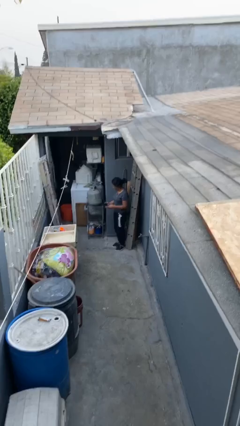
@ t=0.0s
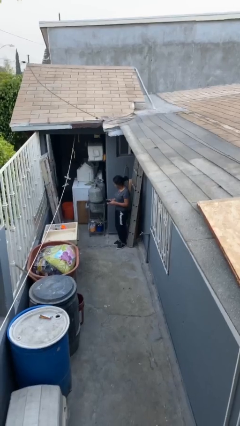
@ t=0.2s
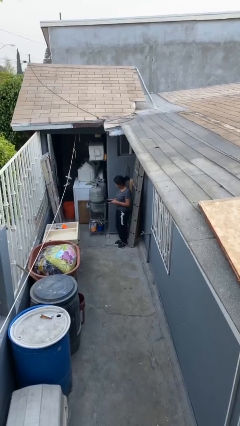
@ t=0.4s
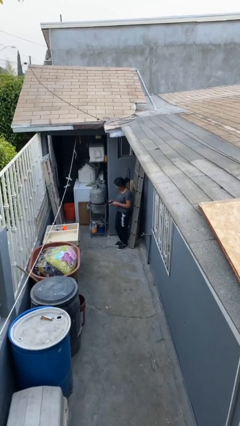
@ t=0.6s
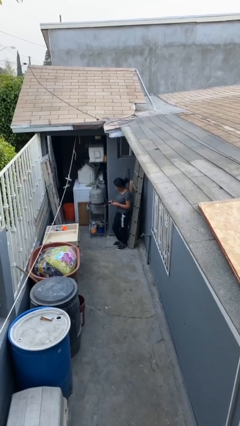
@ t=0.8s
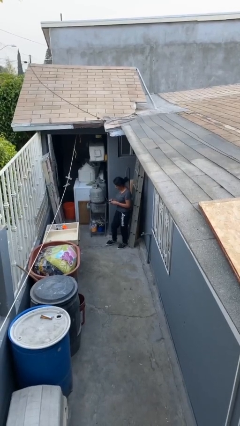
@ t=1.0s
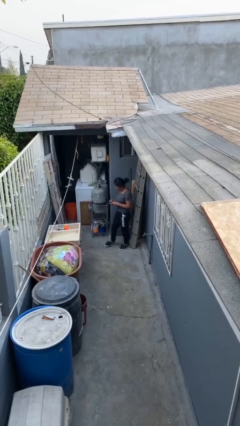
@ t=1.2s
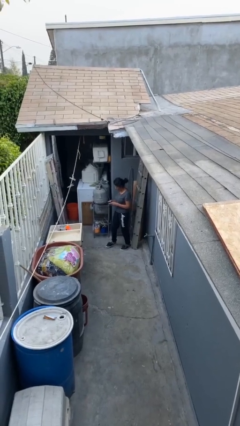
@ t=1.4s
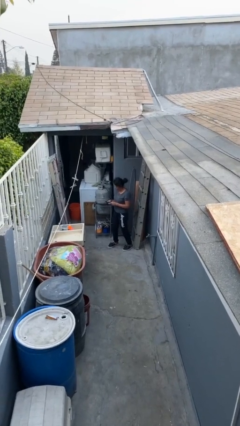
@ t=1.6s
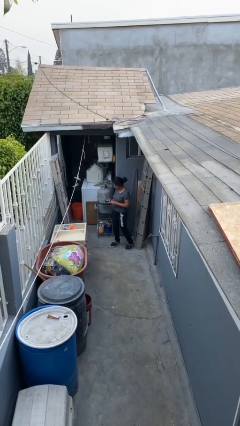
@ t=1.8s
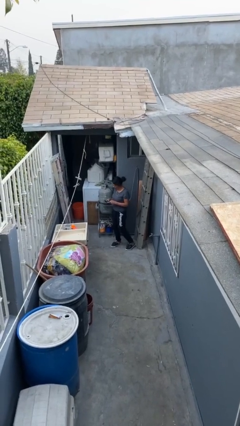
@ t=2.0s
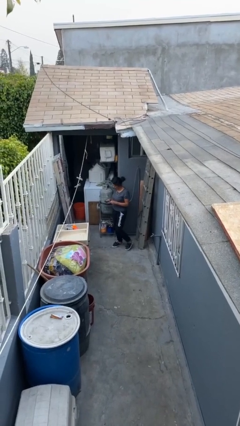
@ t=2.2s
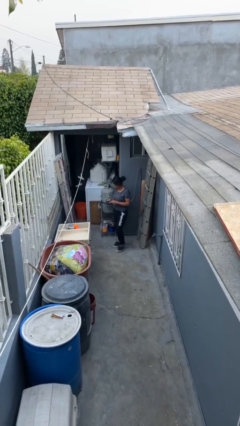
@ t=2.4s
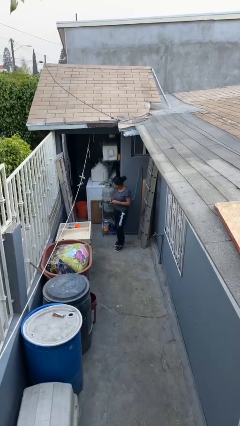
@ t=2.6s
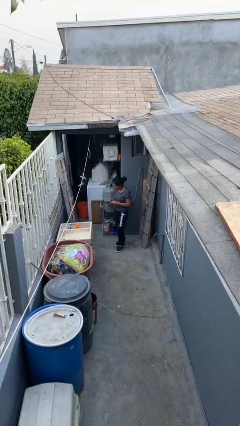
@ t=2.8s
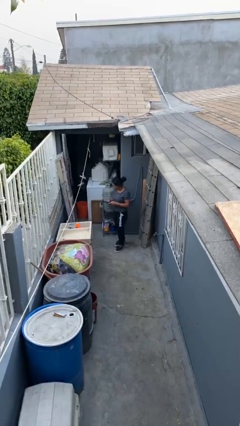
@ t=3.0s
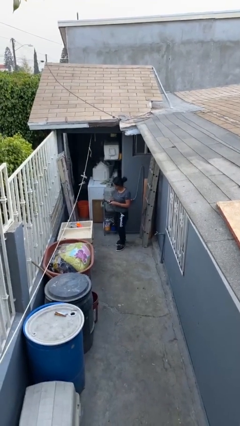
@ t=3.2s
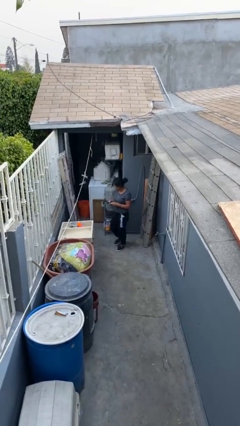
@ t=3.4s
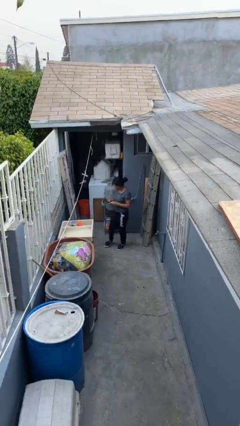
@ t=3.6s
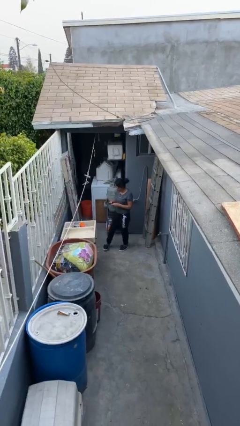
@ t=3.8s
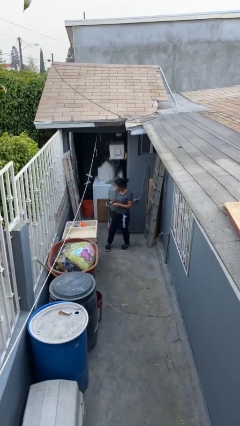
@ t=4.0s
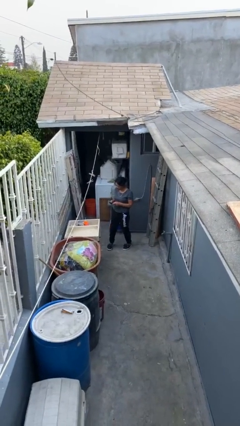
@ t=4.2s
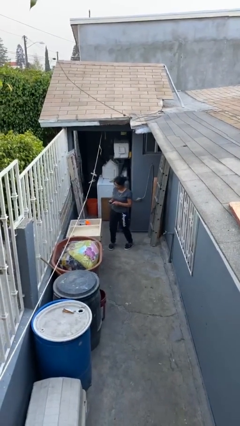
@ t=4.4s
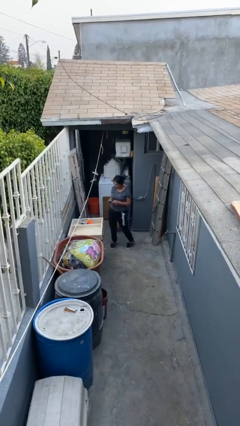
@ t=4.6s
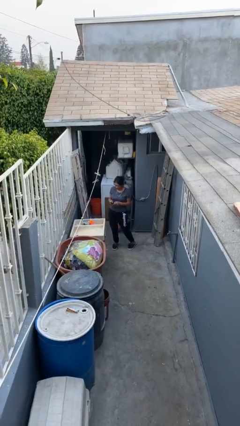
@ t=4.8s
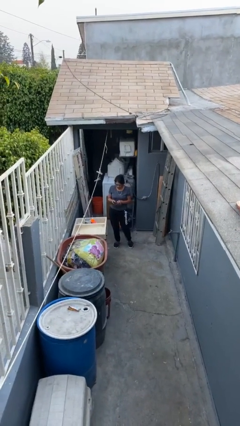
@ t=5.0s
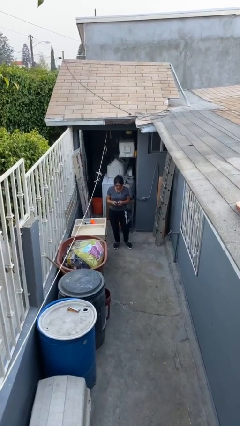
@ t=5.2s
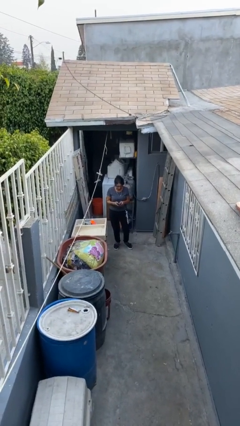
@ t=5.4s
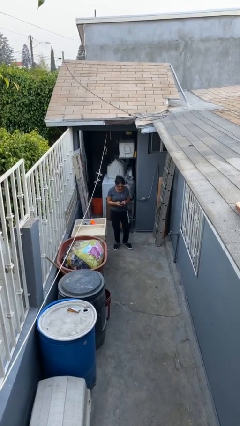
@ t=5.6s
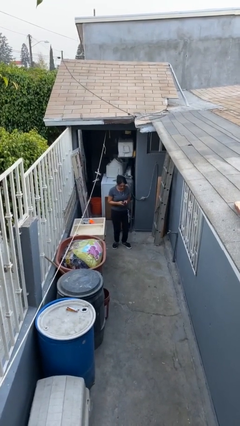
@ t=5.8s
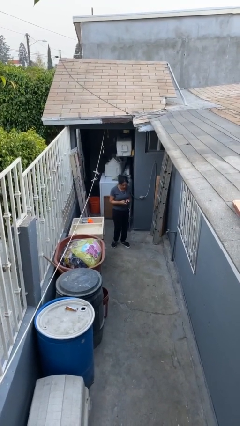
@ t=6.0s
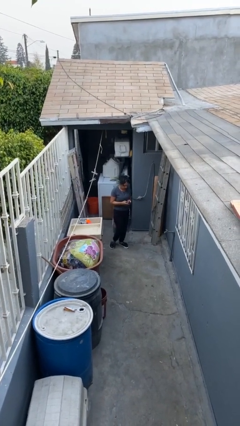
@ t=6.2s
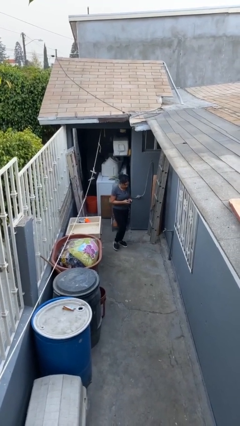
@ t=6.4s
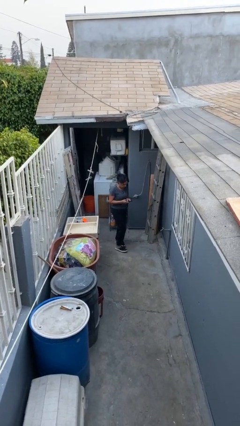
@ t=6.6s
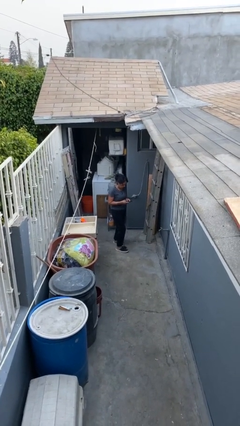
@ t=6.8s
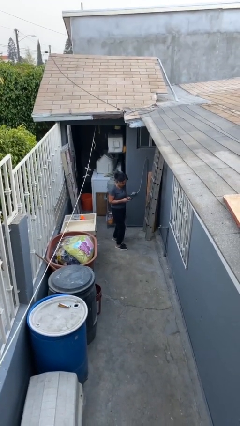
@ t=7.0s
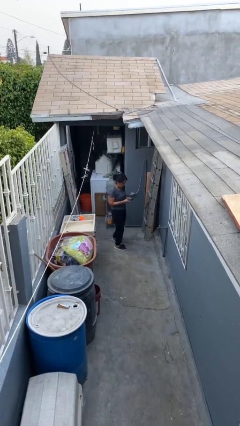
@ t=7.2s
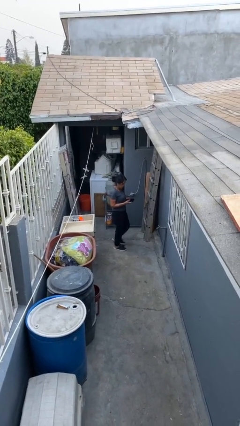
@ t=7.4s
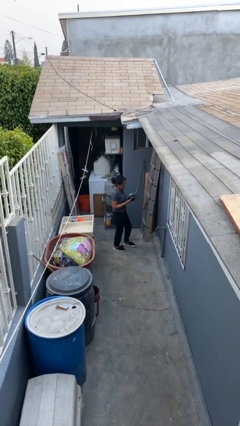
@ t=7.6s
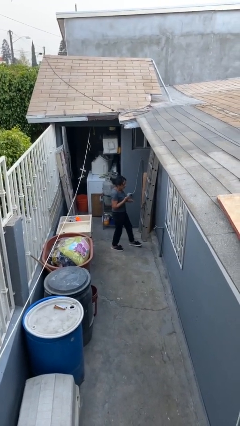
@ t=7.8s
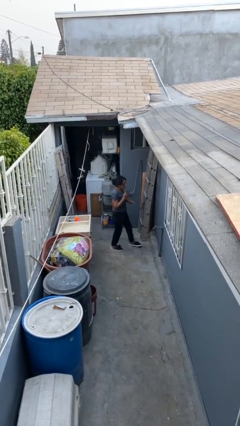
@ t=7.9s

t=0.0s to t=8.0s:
person texts on phone

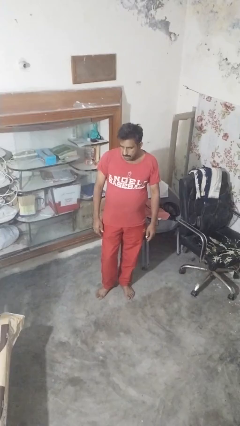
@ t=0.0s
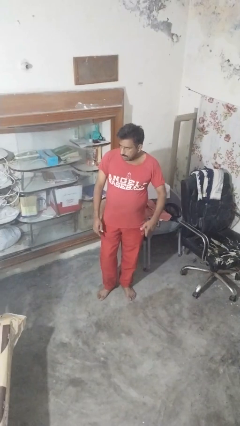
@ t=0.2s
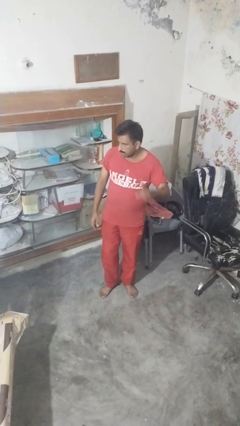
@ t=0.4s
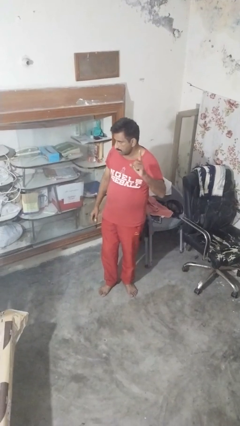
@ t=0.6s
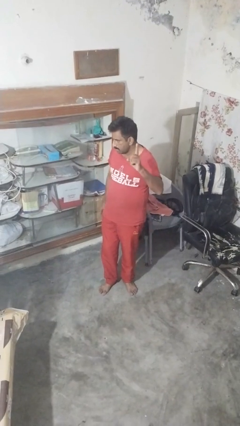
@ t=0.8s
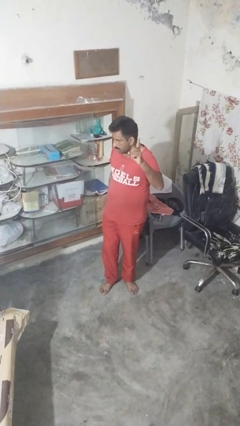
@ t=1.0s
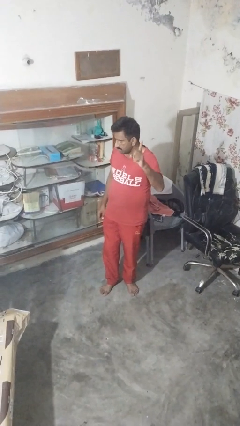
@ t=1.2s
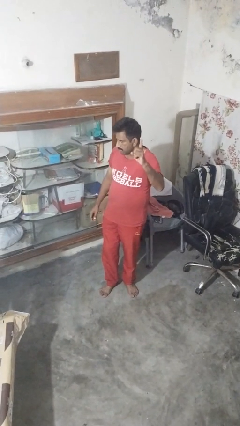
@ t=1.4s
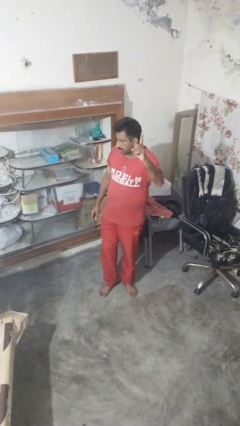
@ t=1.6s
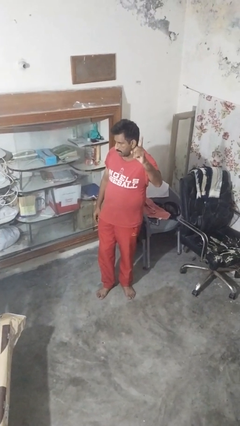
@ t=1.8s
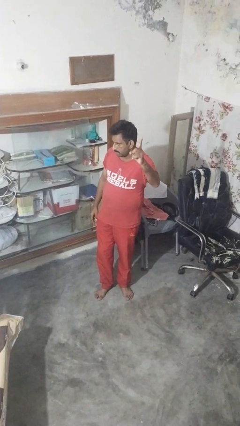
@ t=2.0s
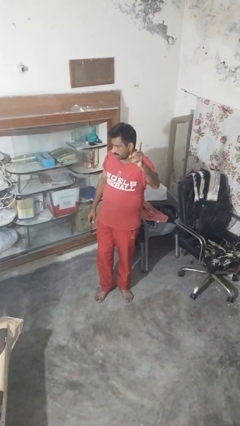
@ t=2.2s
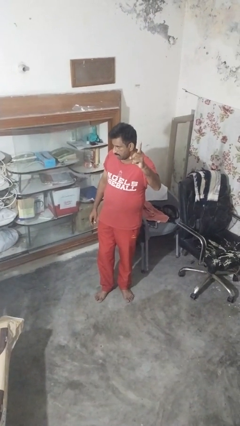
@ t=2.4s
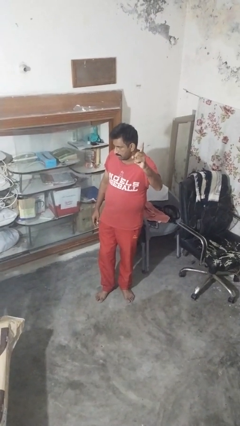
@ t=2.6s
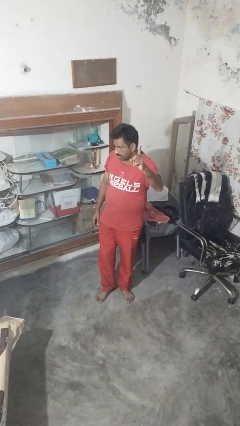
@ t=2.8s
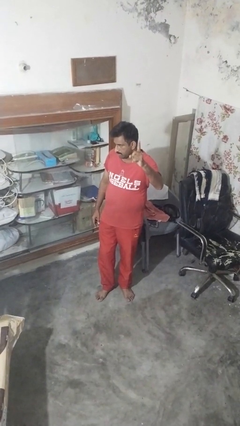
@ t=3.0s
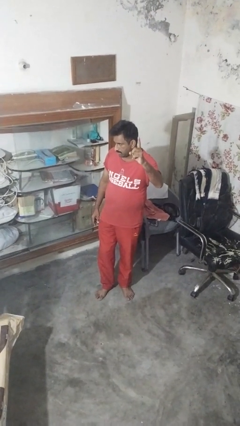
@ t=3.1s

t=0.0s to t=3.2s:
person gestures number one

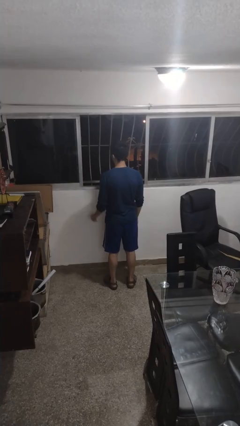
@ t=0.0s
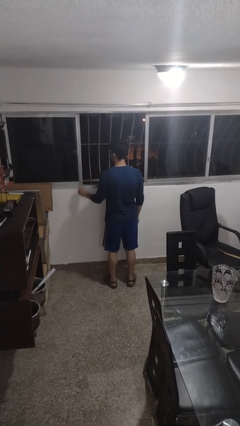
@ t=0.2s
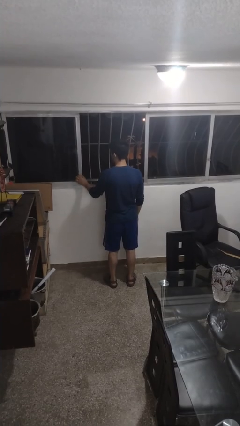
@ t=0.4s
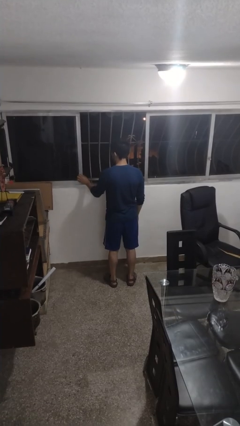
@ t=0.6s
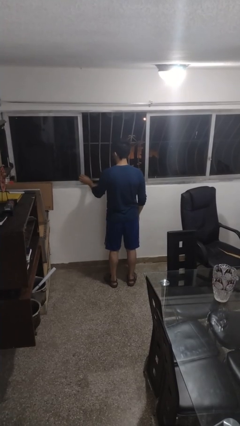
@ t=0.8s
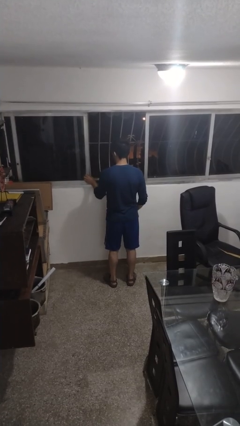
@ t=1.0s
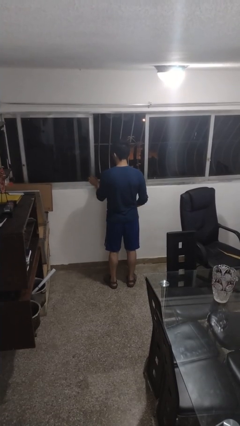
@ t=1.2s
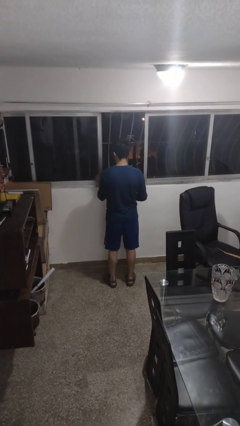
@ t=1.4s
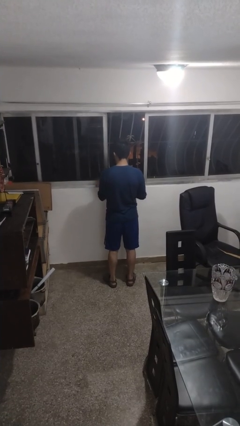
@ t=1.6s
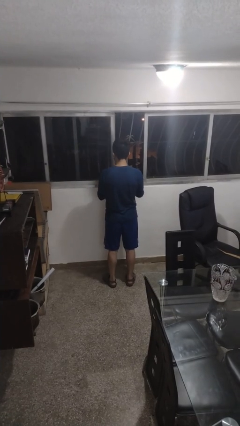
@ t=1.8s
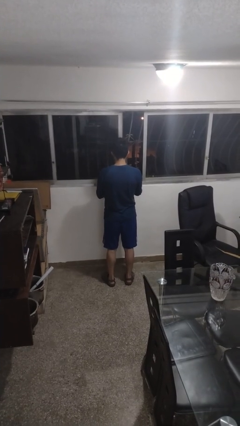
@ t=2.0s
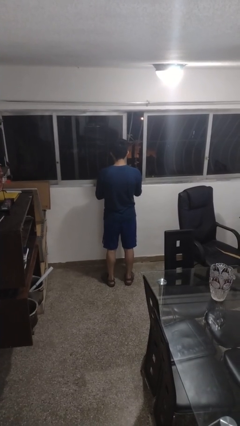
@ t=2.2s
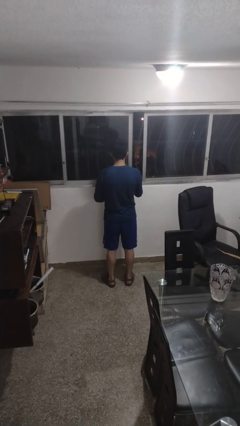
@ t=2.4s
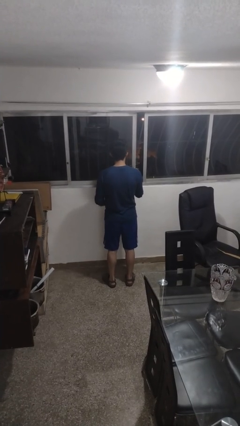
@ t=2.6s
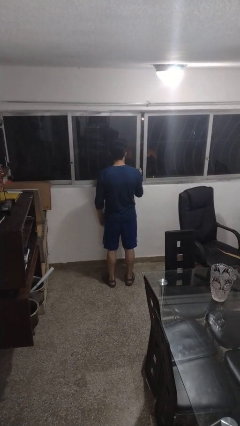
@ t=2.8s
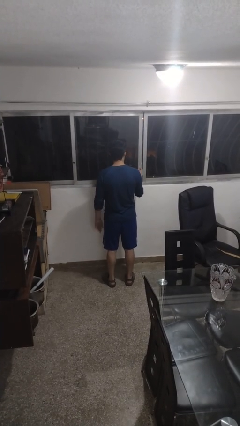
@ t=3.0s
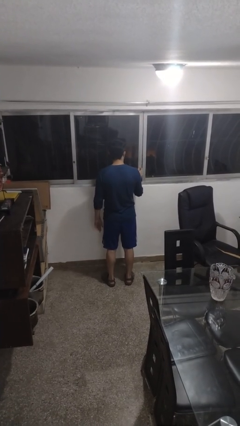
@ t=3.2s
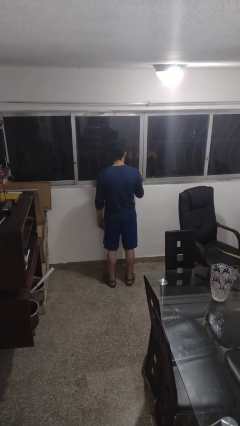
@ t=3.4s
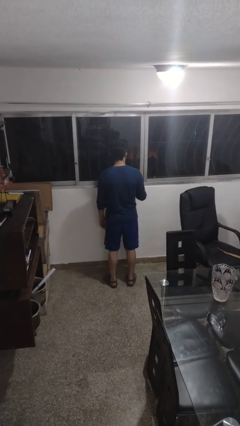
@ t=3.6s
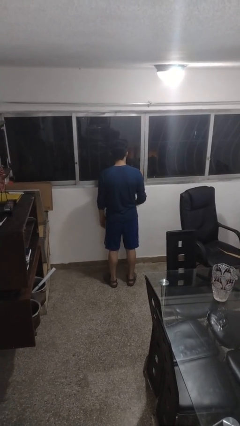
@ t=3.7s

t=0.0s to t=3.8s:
person closes home window

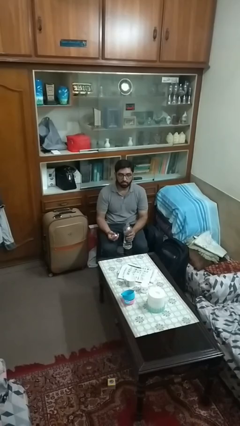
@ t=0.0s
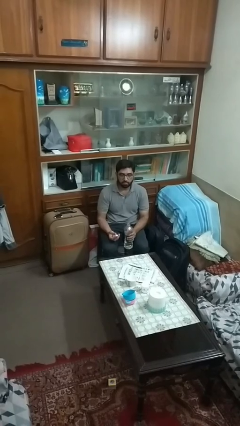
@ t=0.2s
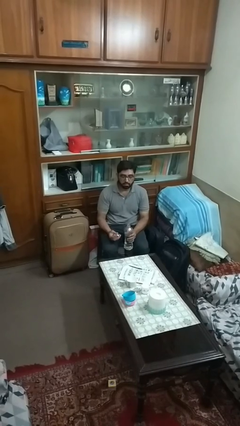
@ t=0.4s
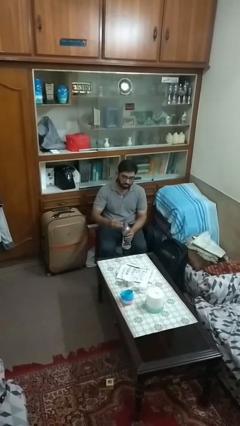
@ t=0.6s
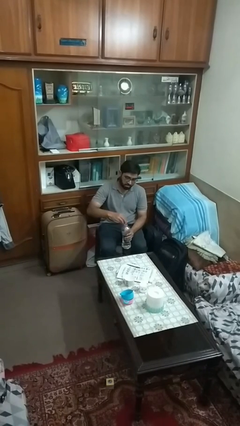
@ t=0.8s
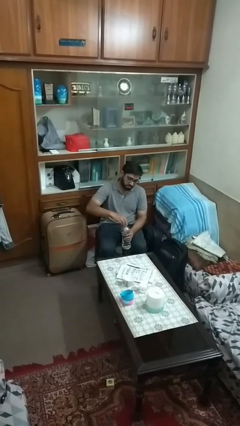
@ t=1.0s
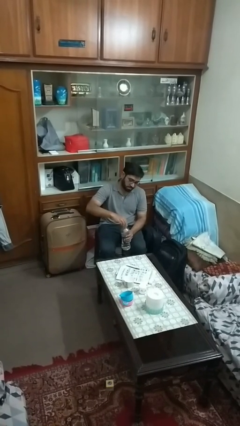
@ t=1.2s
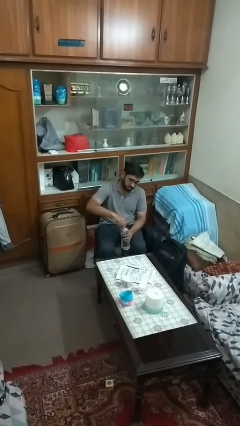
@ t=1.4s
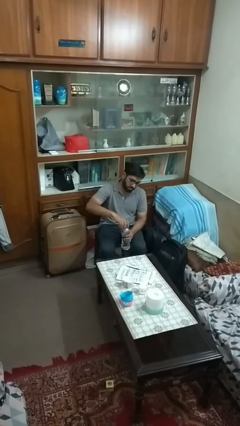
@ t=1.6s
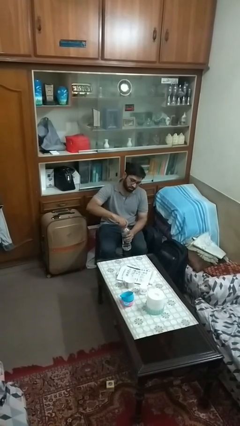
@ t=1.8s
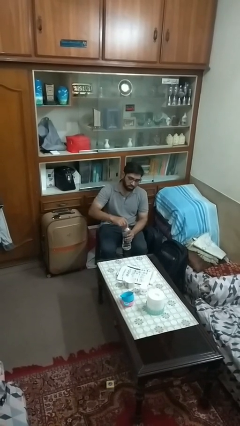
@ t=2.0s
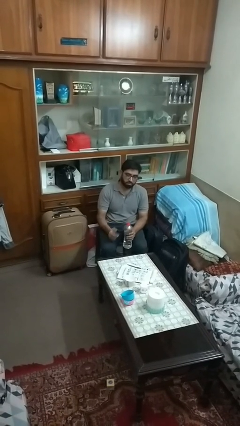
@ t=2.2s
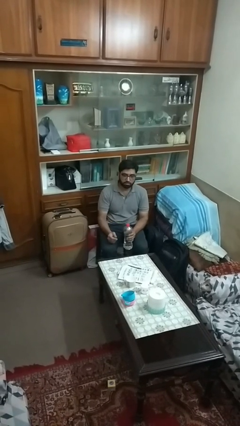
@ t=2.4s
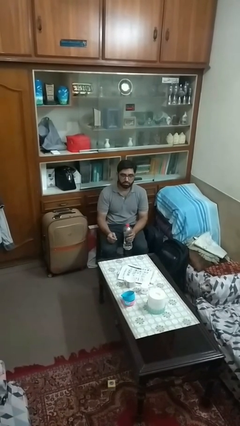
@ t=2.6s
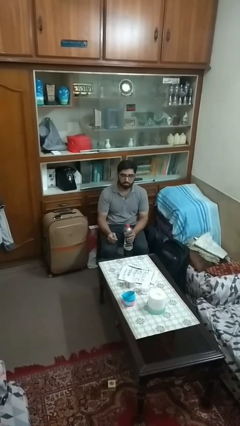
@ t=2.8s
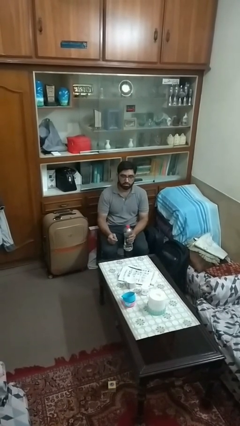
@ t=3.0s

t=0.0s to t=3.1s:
person screws lid to bottle
